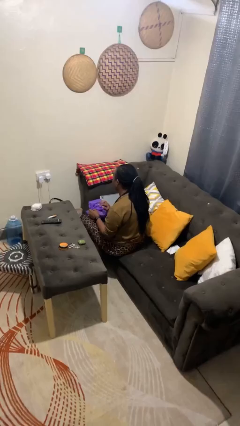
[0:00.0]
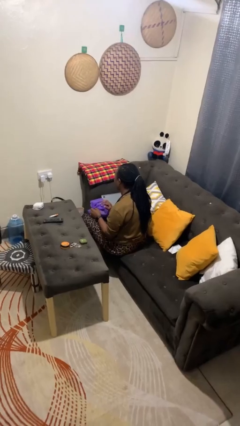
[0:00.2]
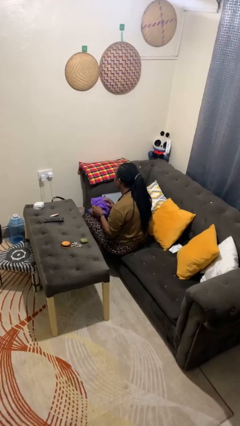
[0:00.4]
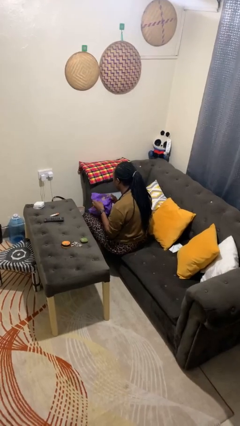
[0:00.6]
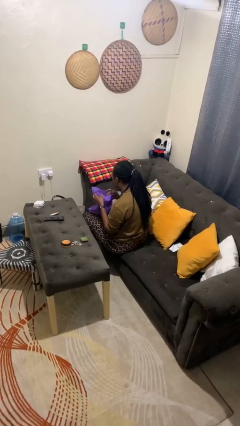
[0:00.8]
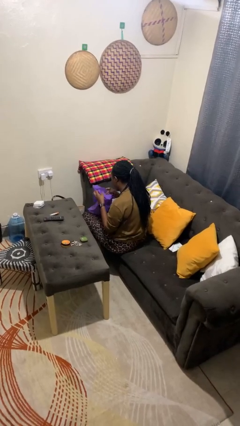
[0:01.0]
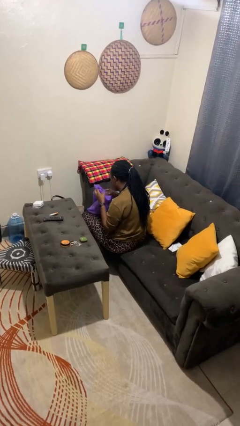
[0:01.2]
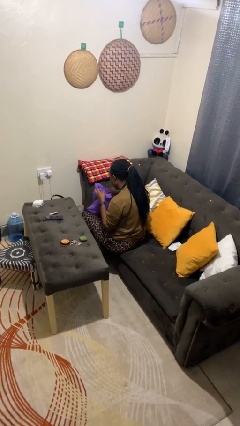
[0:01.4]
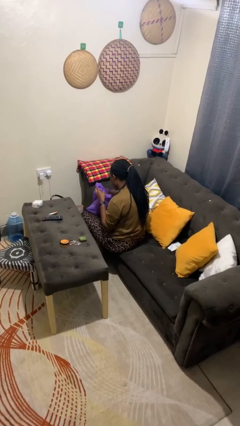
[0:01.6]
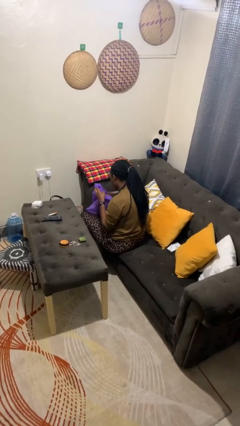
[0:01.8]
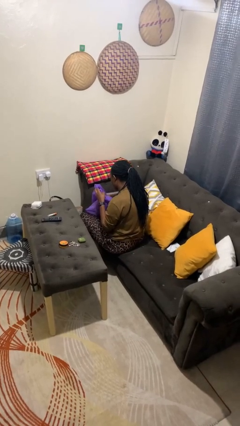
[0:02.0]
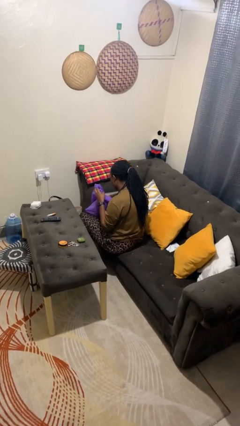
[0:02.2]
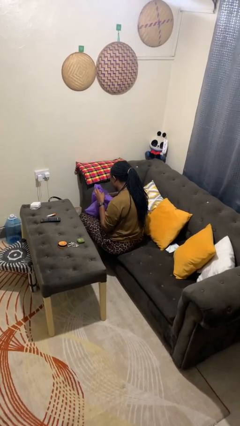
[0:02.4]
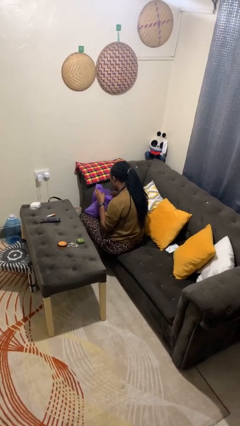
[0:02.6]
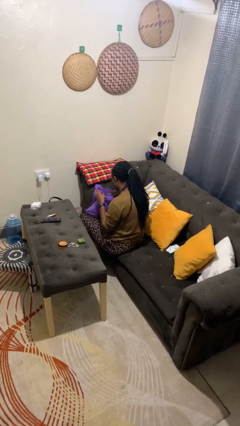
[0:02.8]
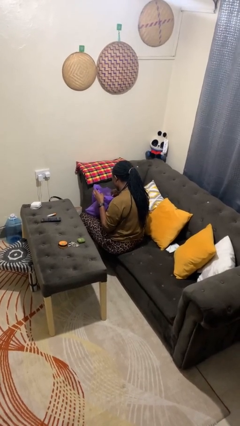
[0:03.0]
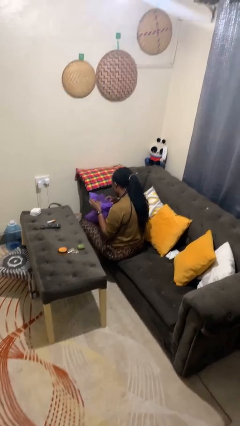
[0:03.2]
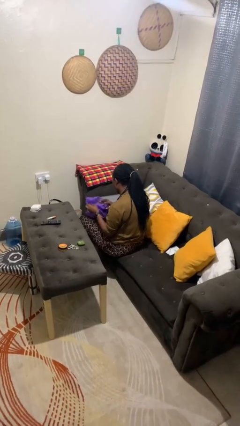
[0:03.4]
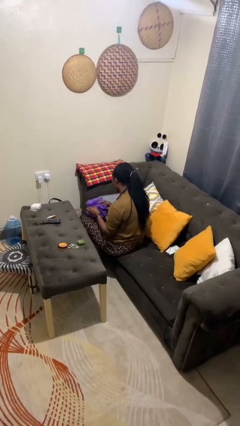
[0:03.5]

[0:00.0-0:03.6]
person searches in bag

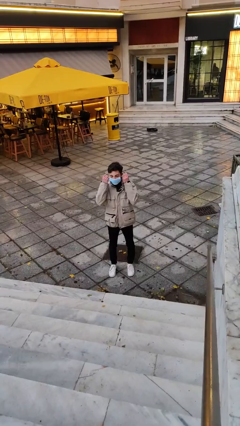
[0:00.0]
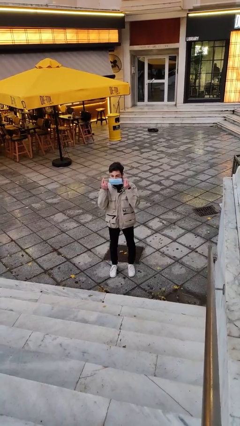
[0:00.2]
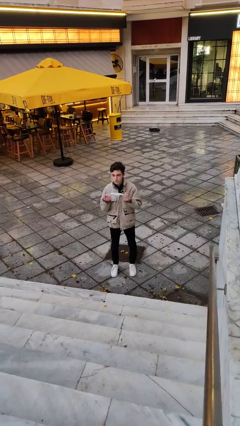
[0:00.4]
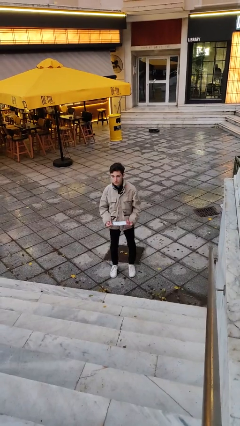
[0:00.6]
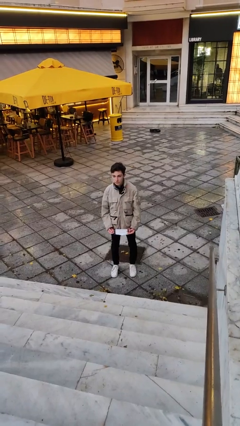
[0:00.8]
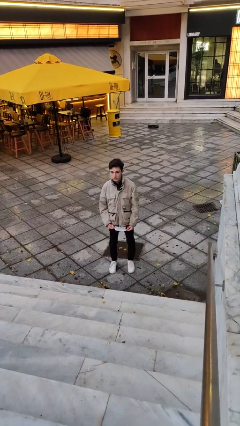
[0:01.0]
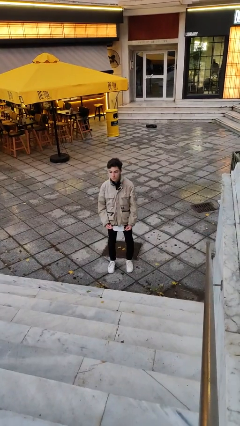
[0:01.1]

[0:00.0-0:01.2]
person takes off facemask

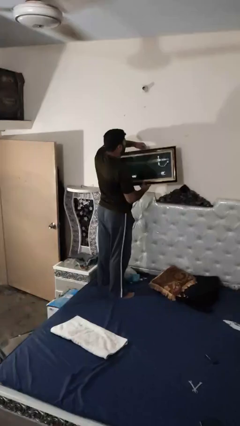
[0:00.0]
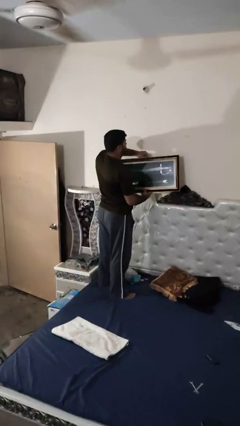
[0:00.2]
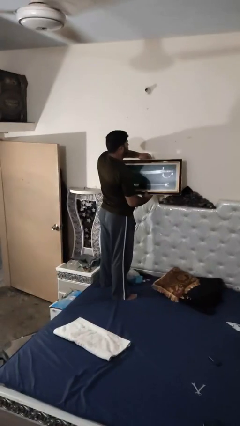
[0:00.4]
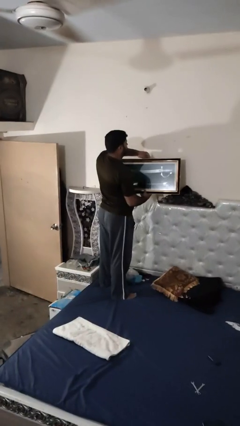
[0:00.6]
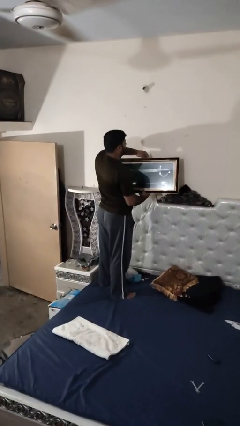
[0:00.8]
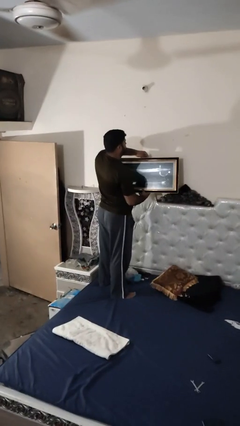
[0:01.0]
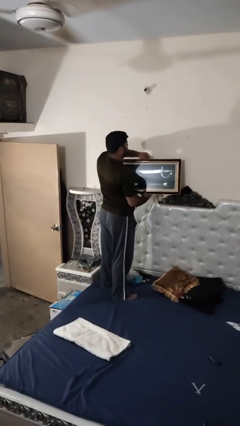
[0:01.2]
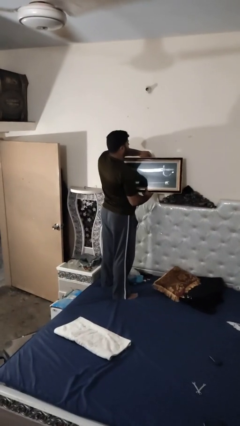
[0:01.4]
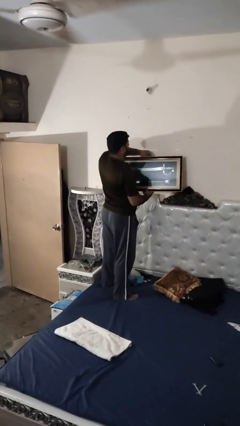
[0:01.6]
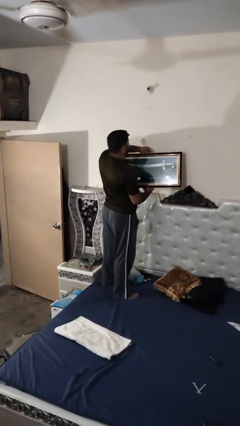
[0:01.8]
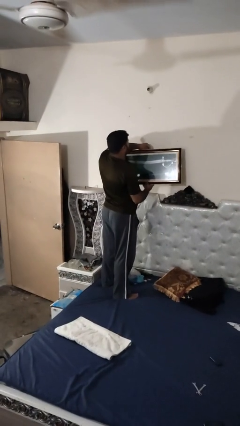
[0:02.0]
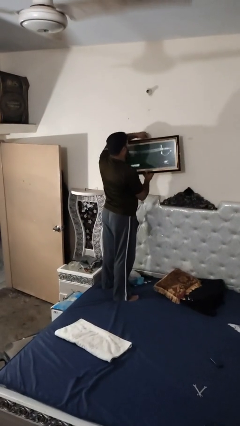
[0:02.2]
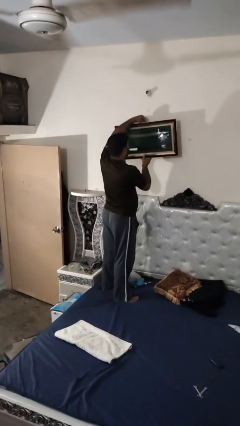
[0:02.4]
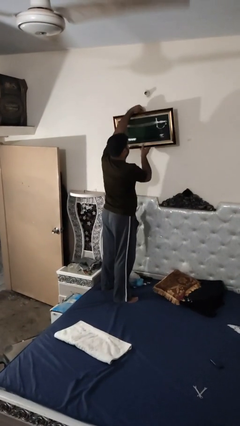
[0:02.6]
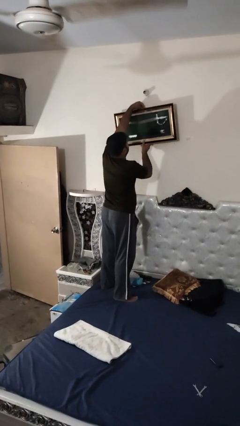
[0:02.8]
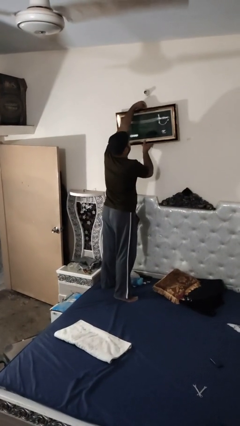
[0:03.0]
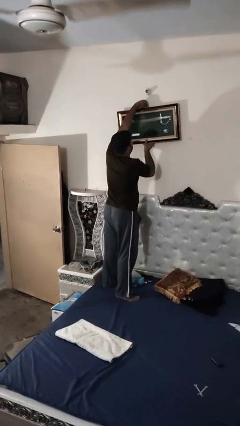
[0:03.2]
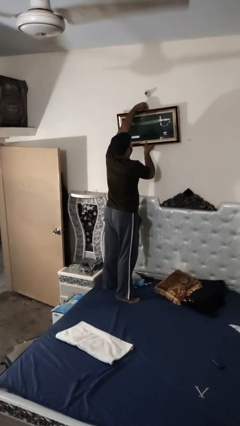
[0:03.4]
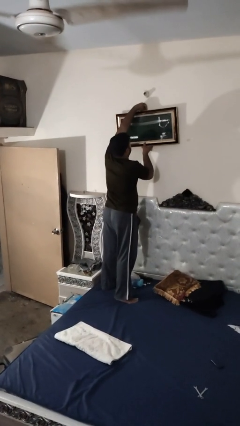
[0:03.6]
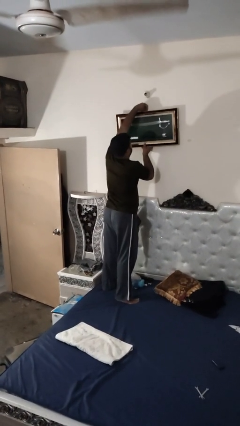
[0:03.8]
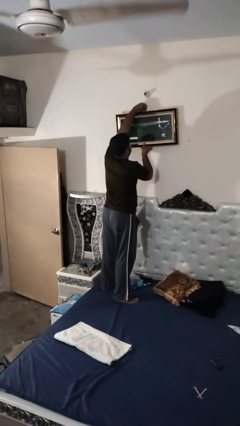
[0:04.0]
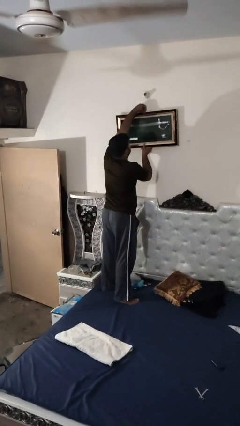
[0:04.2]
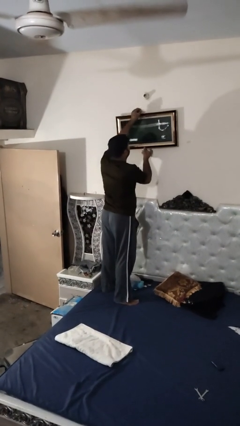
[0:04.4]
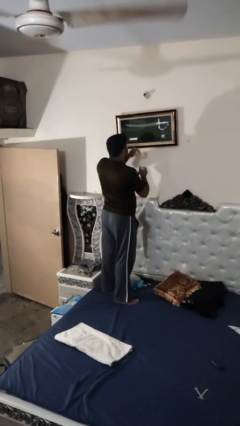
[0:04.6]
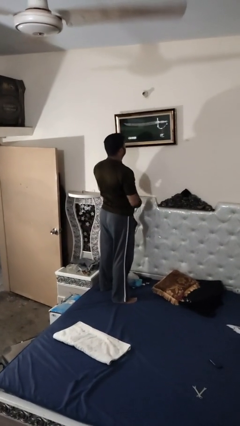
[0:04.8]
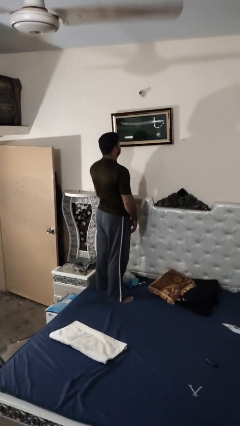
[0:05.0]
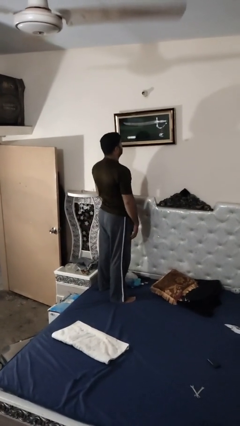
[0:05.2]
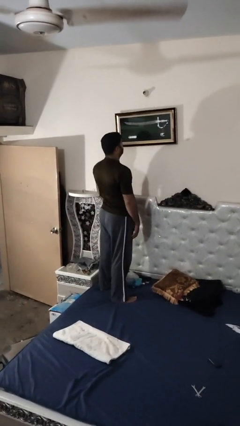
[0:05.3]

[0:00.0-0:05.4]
person puts up picture frame

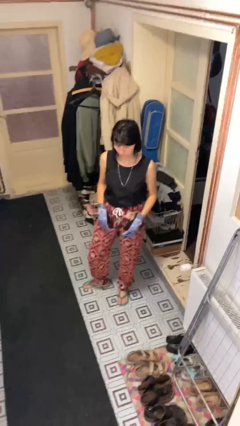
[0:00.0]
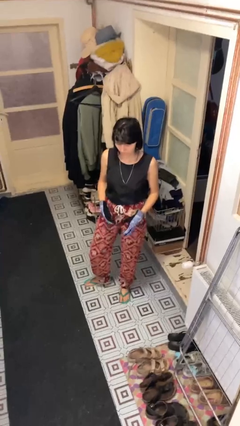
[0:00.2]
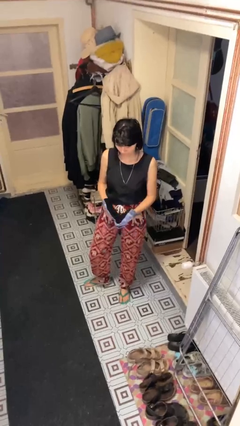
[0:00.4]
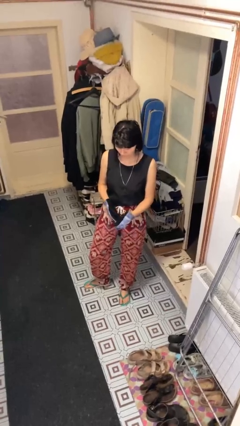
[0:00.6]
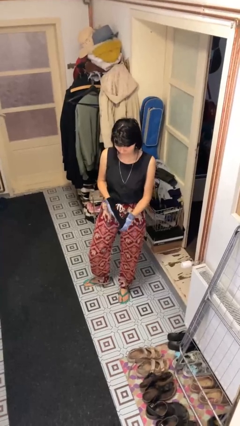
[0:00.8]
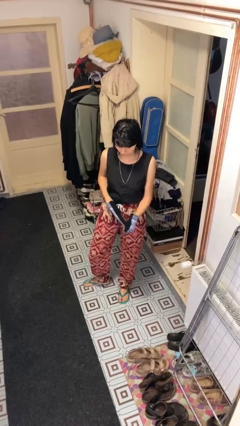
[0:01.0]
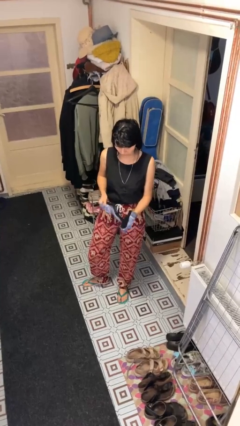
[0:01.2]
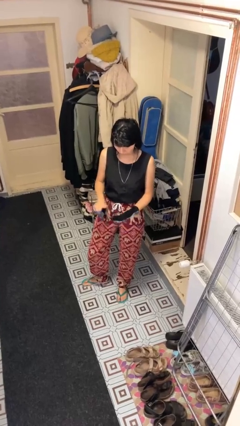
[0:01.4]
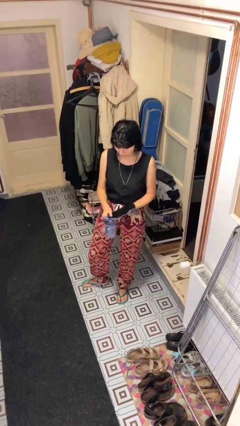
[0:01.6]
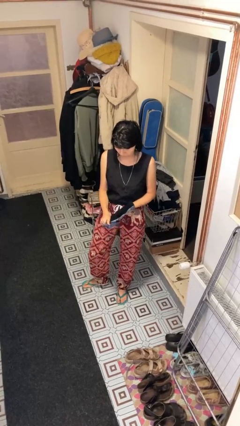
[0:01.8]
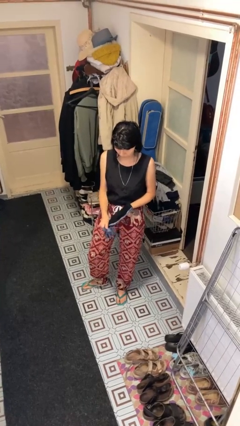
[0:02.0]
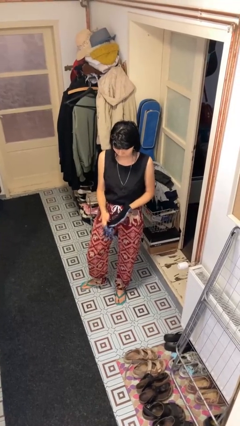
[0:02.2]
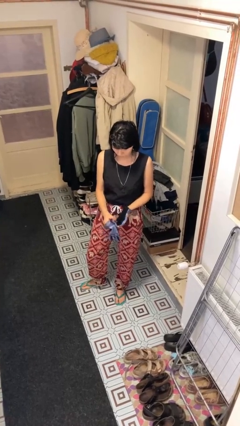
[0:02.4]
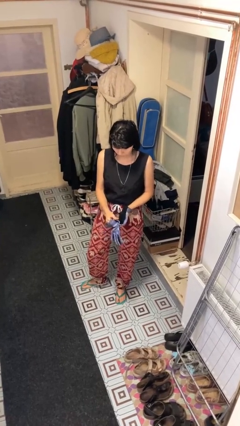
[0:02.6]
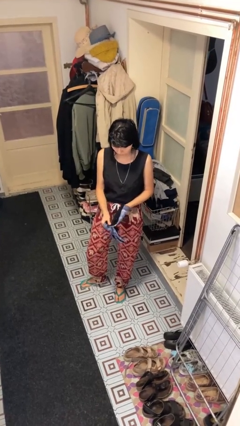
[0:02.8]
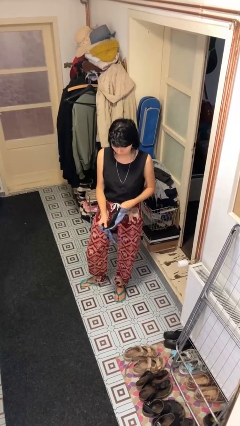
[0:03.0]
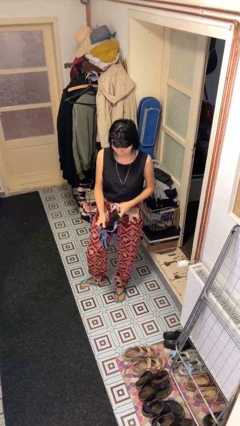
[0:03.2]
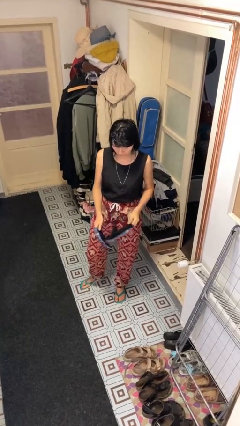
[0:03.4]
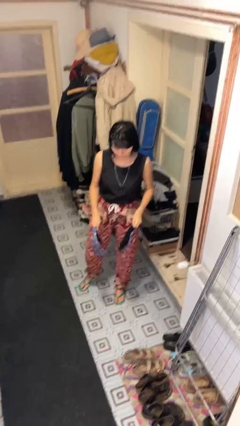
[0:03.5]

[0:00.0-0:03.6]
person takes off gloves

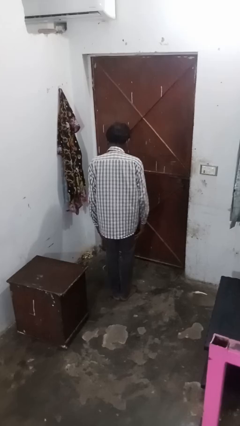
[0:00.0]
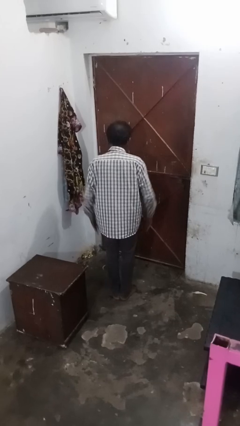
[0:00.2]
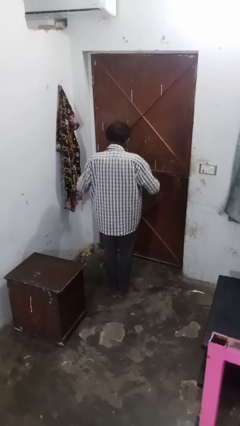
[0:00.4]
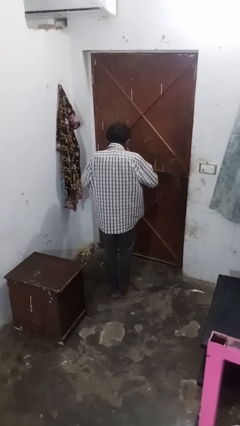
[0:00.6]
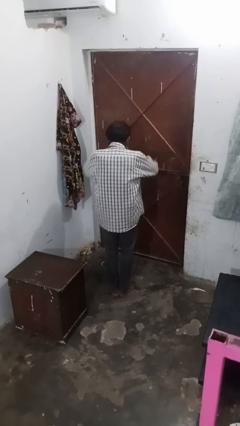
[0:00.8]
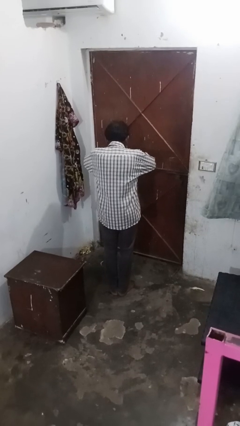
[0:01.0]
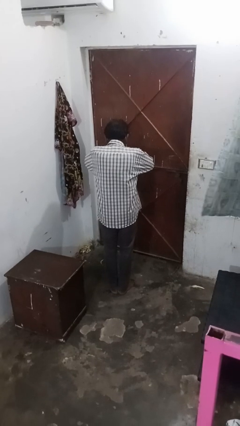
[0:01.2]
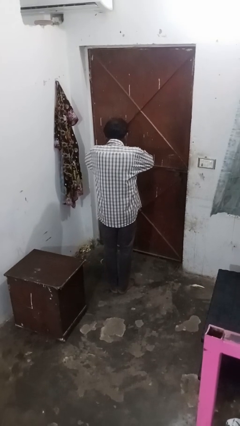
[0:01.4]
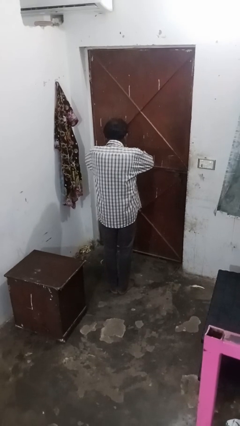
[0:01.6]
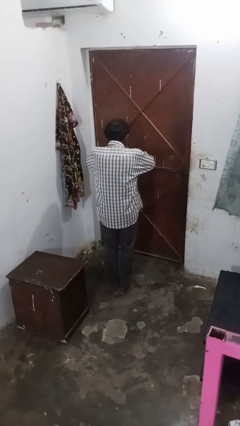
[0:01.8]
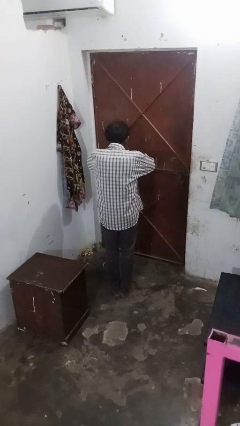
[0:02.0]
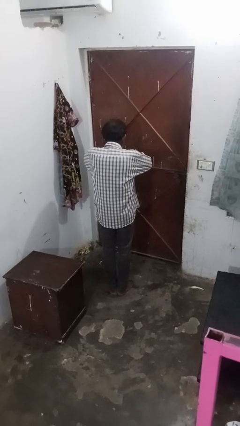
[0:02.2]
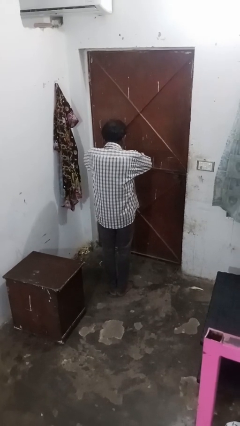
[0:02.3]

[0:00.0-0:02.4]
person blows nose

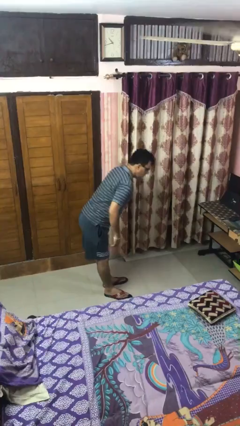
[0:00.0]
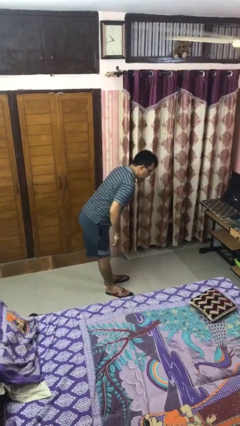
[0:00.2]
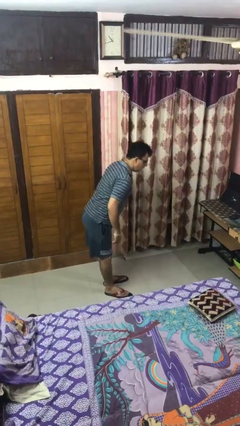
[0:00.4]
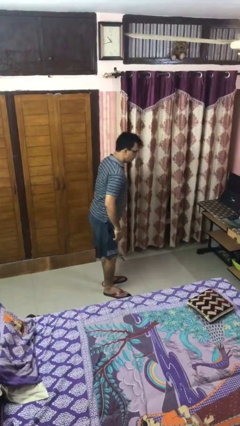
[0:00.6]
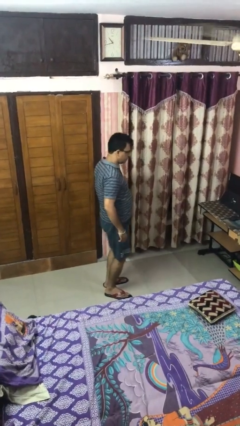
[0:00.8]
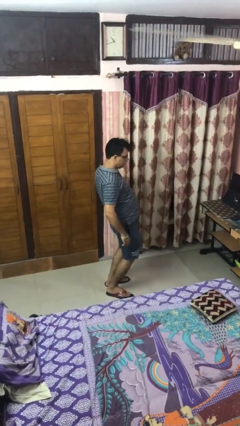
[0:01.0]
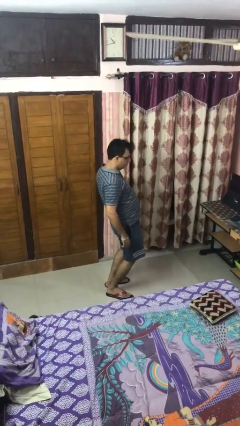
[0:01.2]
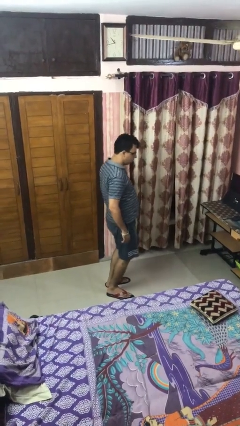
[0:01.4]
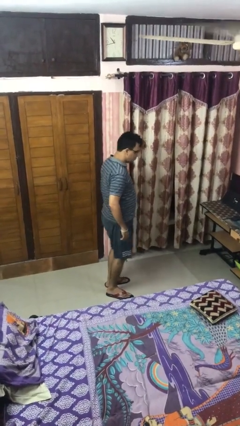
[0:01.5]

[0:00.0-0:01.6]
person wiggles hips
